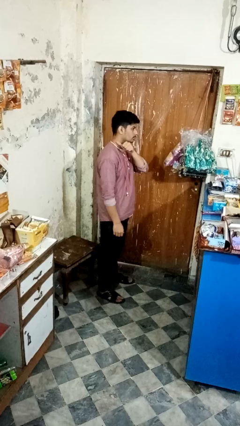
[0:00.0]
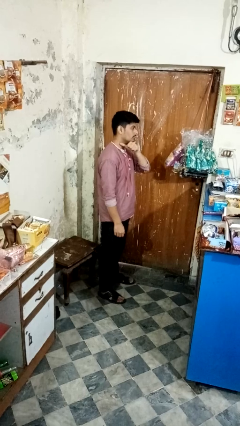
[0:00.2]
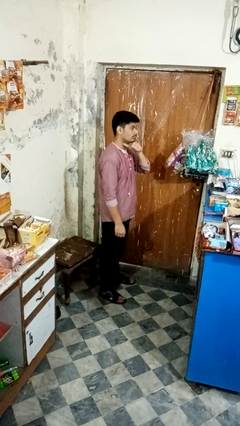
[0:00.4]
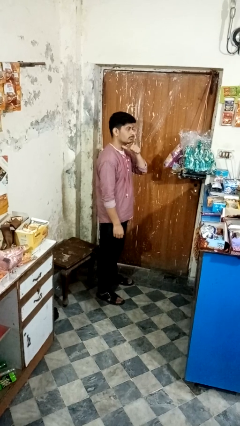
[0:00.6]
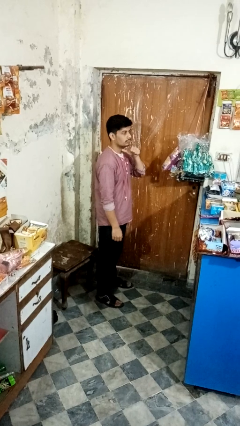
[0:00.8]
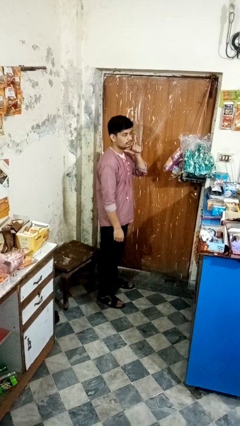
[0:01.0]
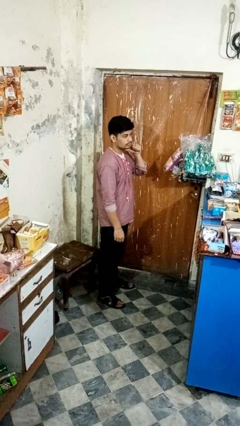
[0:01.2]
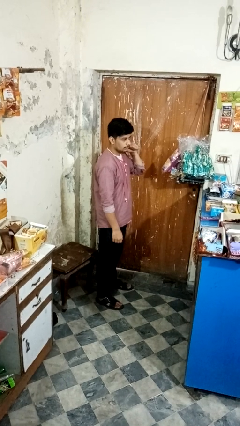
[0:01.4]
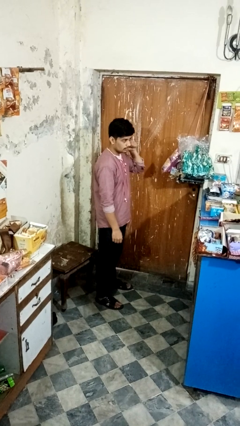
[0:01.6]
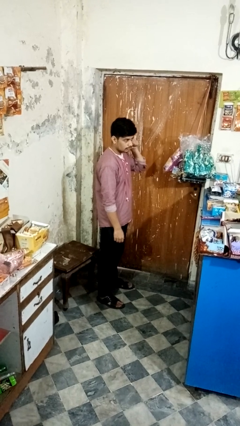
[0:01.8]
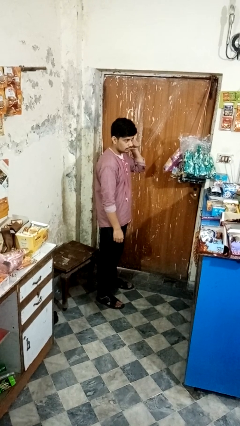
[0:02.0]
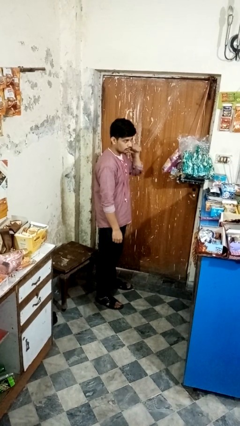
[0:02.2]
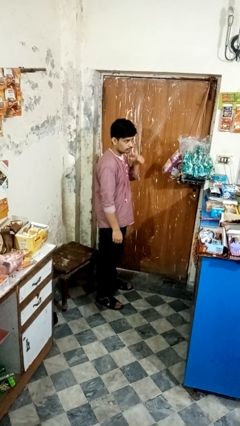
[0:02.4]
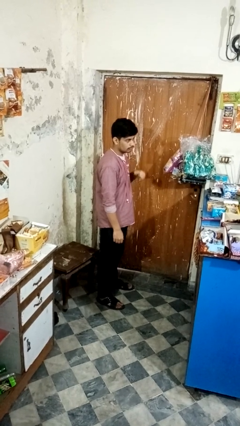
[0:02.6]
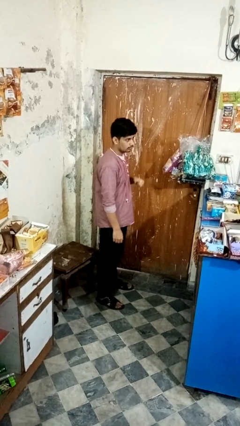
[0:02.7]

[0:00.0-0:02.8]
person gestures cut

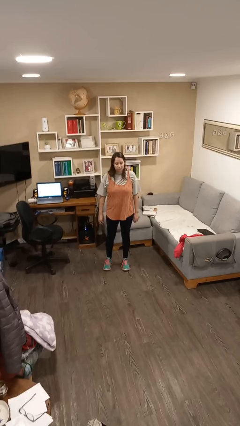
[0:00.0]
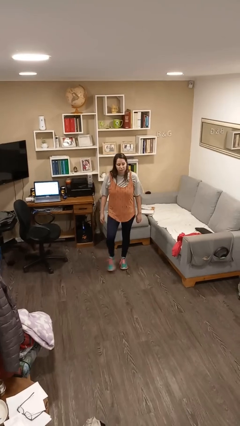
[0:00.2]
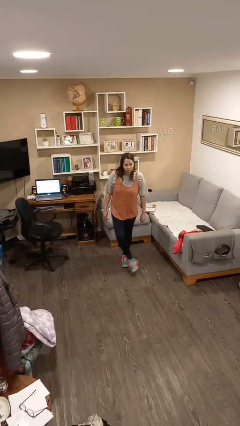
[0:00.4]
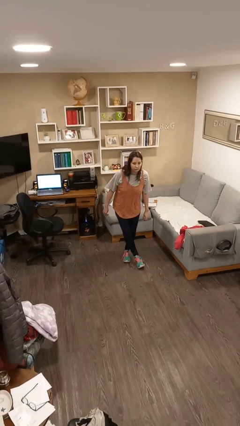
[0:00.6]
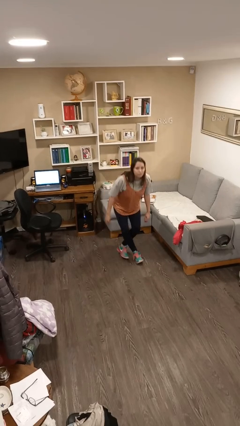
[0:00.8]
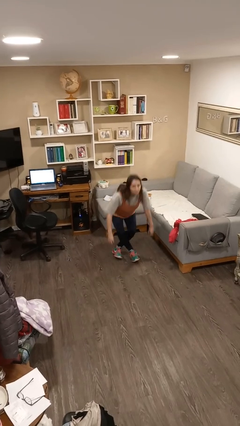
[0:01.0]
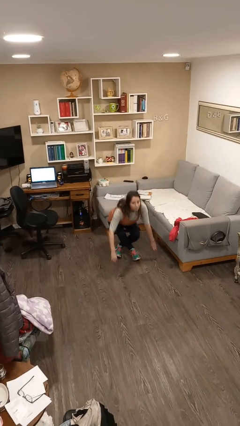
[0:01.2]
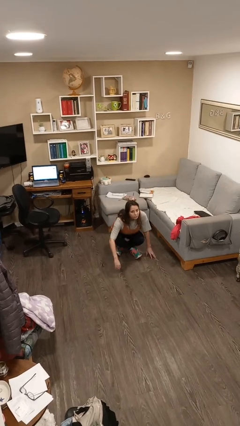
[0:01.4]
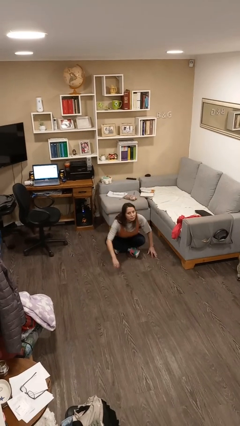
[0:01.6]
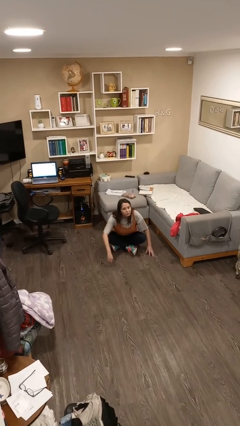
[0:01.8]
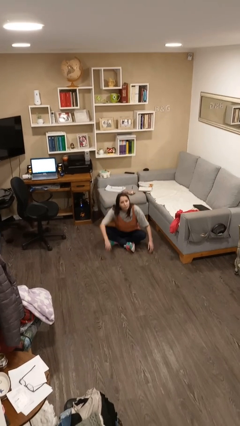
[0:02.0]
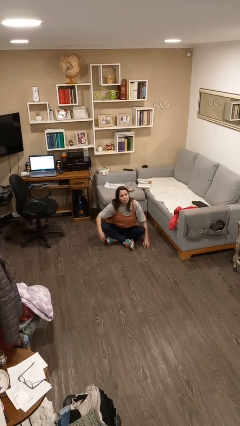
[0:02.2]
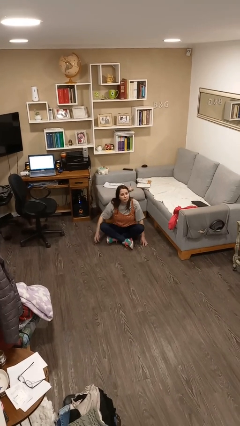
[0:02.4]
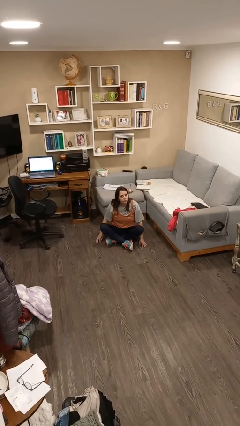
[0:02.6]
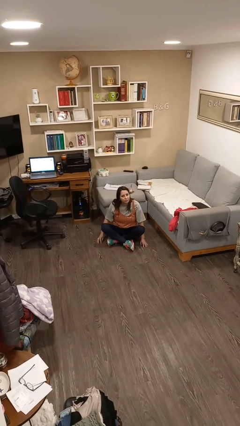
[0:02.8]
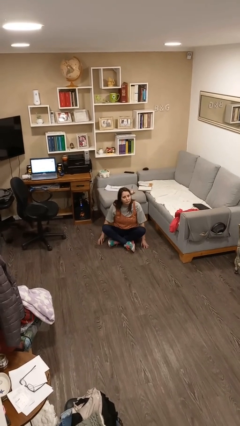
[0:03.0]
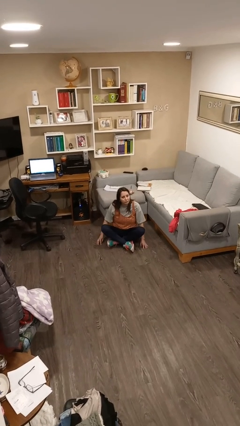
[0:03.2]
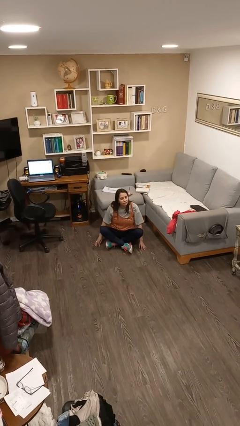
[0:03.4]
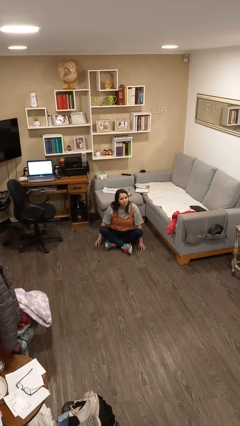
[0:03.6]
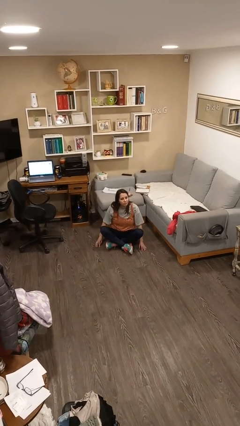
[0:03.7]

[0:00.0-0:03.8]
person sits crisscross

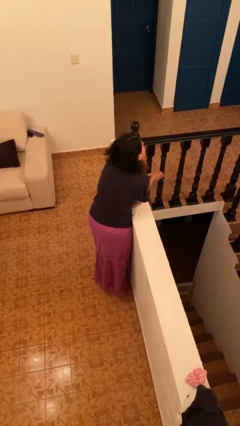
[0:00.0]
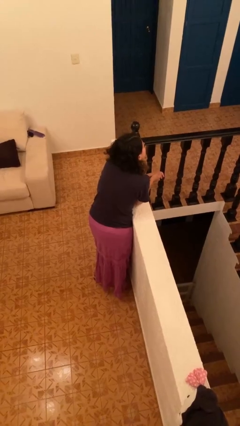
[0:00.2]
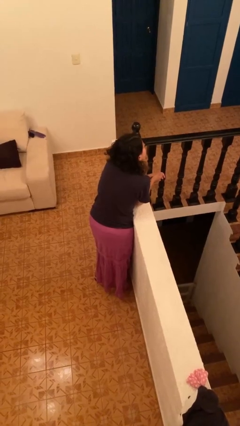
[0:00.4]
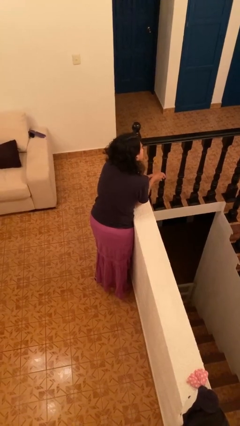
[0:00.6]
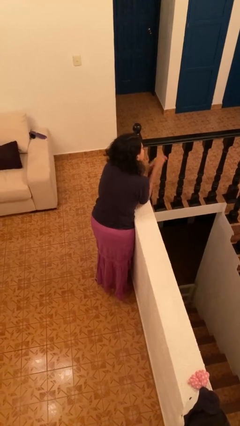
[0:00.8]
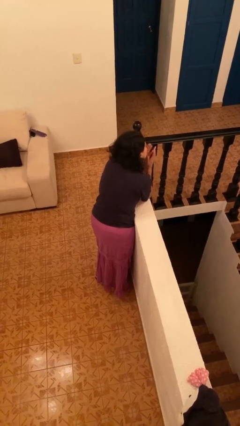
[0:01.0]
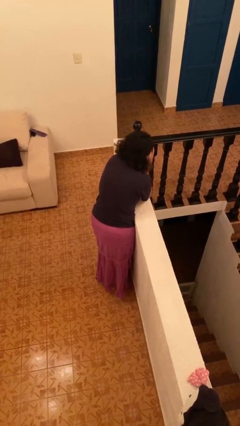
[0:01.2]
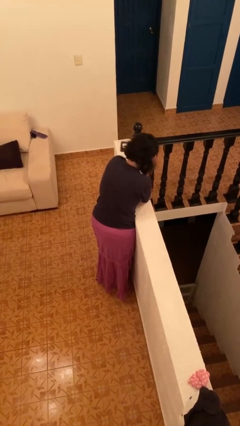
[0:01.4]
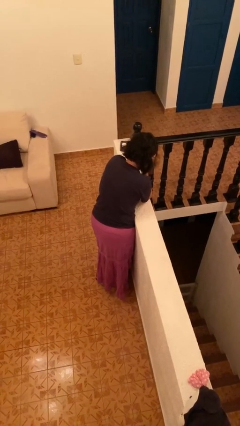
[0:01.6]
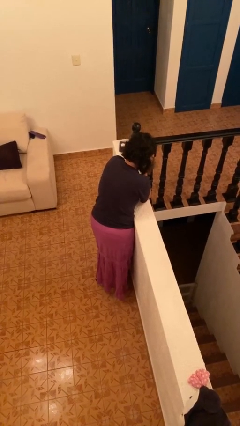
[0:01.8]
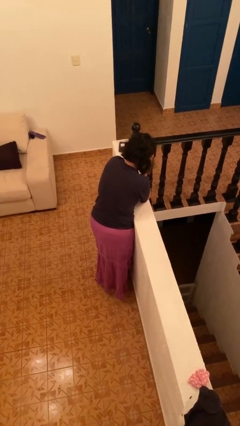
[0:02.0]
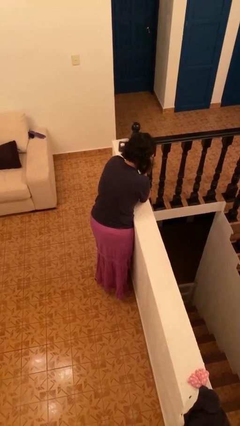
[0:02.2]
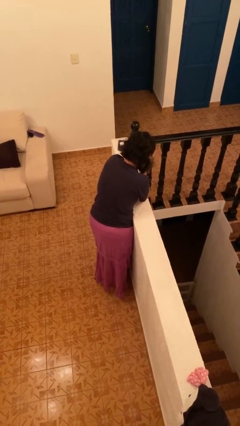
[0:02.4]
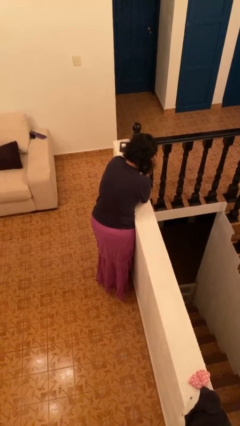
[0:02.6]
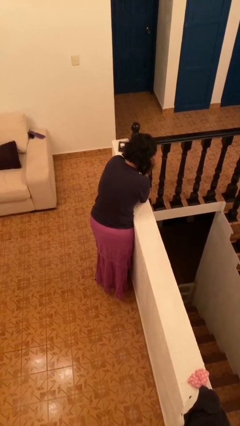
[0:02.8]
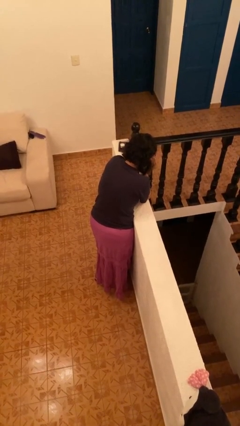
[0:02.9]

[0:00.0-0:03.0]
person covers face with hands

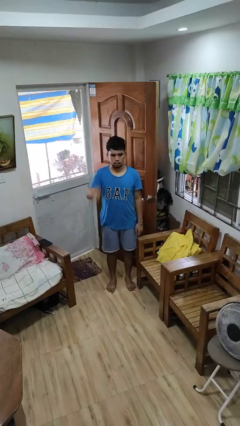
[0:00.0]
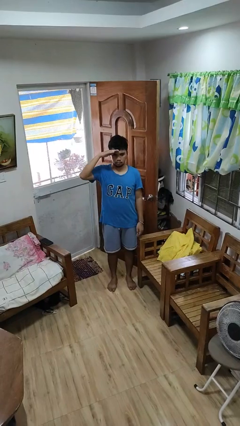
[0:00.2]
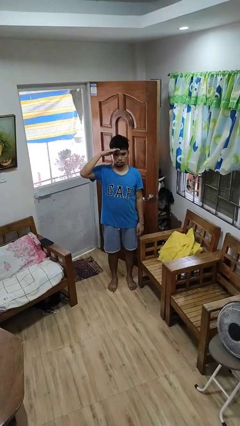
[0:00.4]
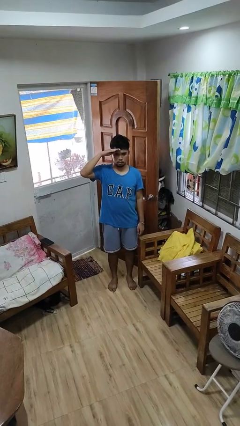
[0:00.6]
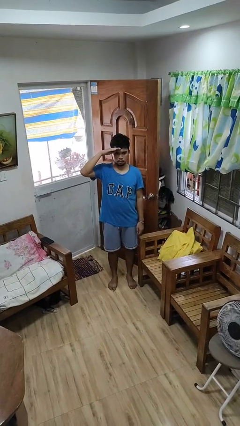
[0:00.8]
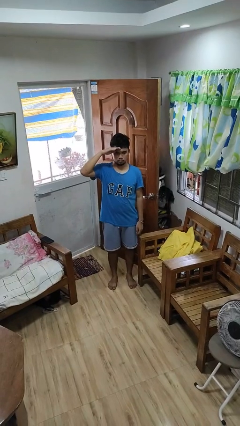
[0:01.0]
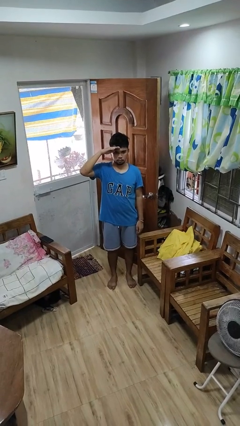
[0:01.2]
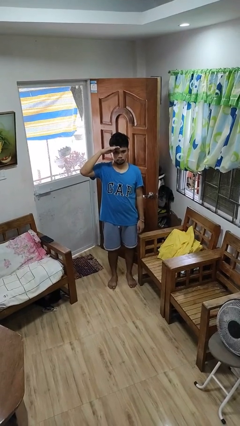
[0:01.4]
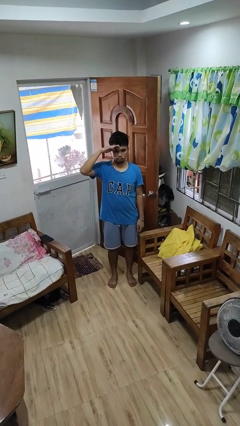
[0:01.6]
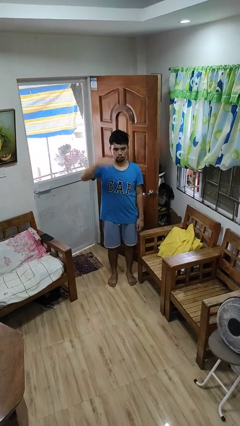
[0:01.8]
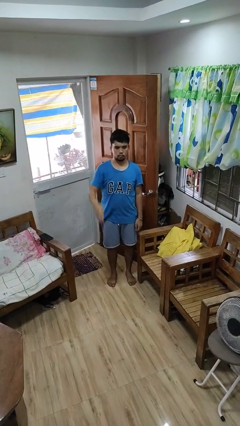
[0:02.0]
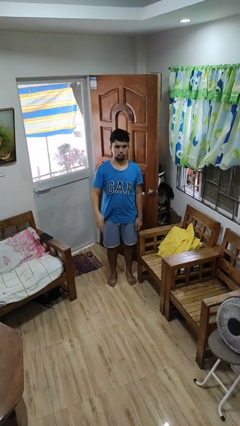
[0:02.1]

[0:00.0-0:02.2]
person salutes

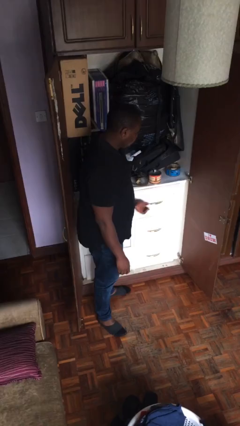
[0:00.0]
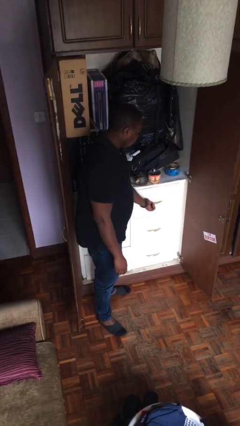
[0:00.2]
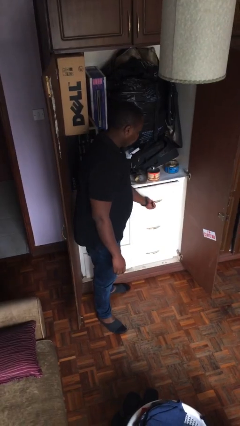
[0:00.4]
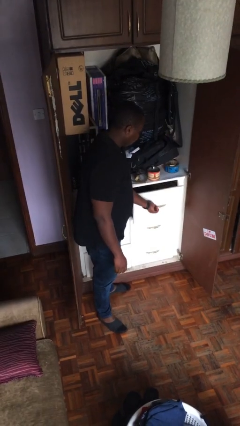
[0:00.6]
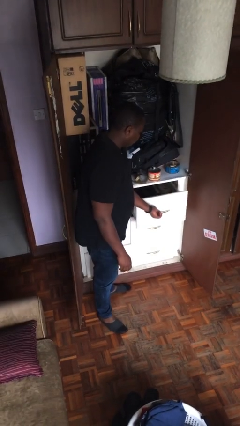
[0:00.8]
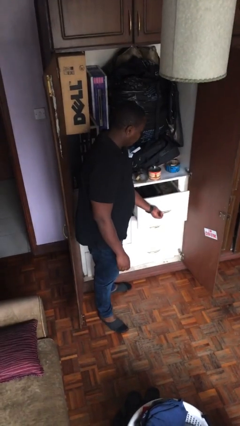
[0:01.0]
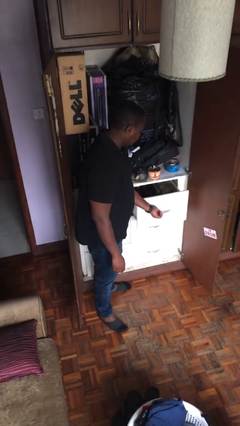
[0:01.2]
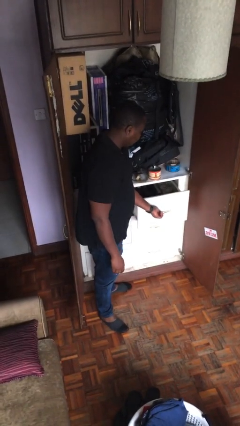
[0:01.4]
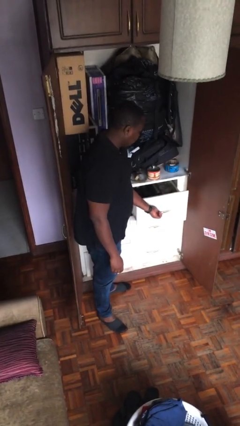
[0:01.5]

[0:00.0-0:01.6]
person opens dresser drawer

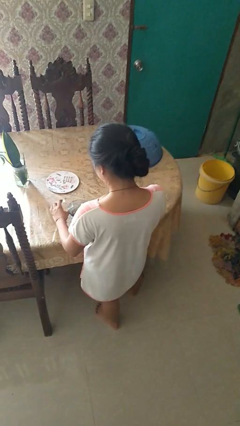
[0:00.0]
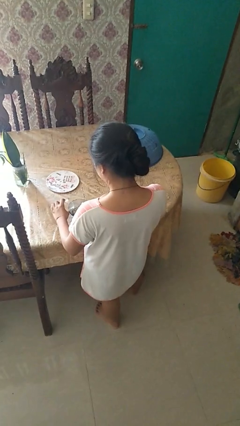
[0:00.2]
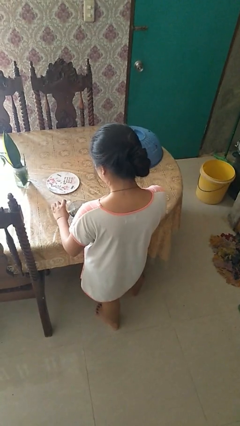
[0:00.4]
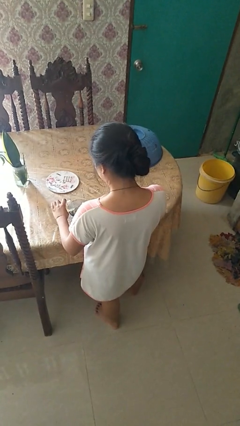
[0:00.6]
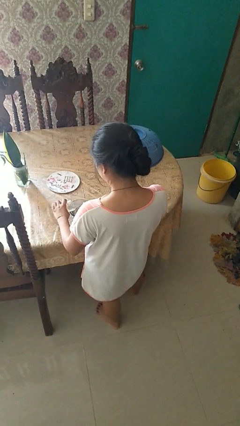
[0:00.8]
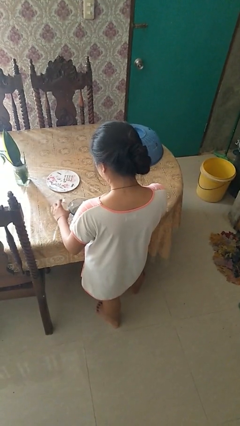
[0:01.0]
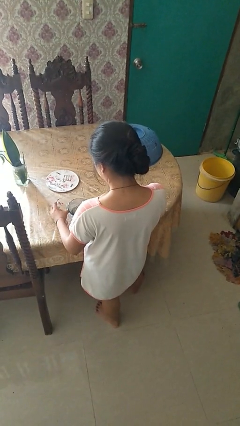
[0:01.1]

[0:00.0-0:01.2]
person pours into bowl

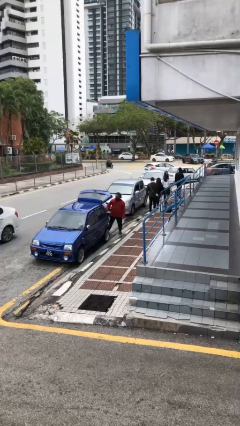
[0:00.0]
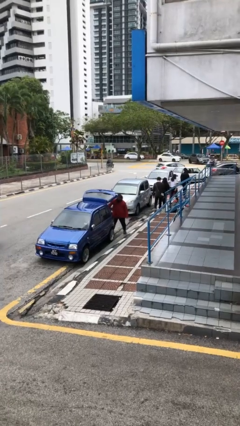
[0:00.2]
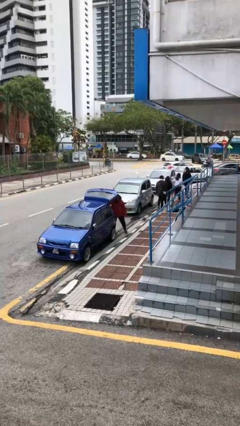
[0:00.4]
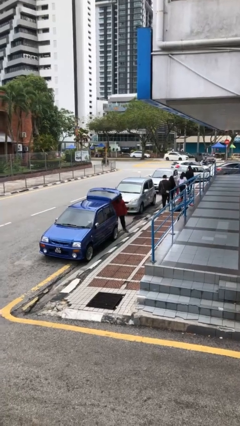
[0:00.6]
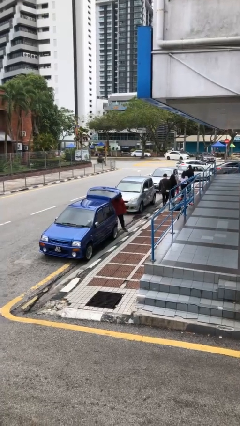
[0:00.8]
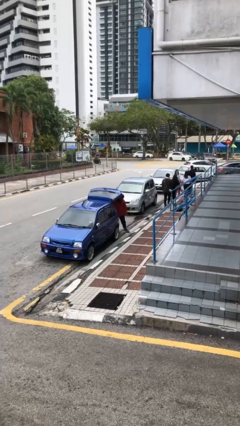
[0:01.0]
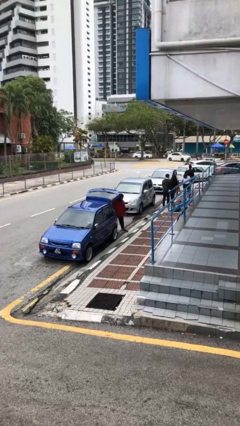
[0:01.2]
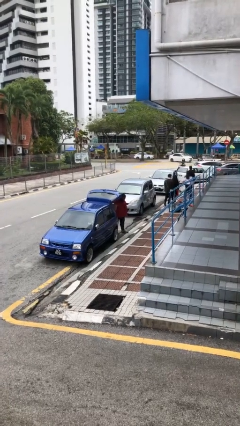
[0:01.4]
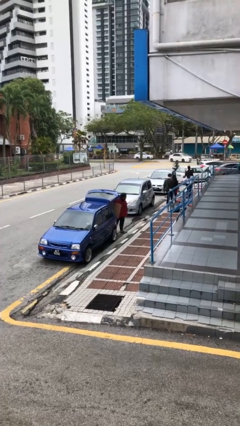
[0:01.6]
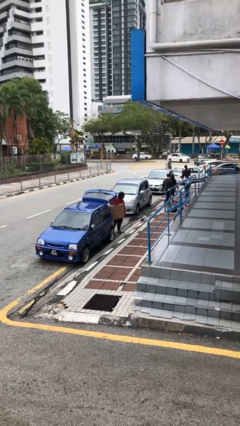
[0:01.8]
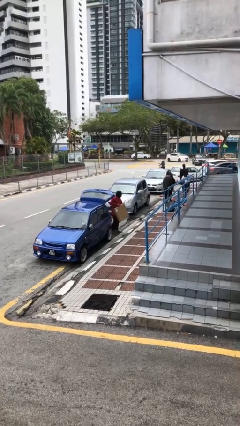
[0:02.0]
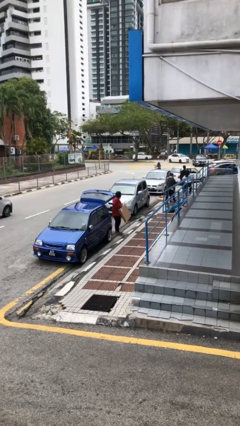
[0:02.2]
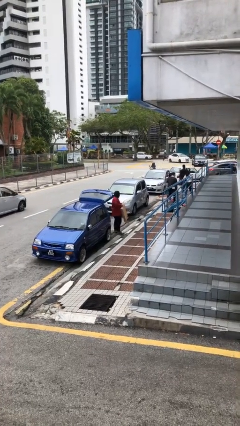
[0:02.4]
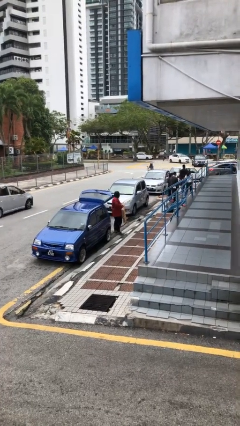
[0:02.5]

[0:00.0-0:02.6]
person unloads car
